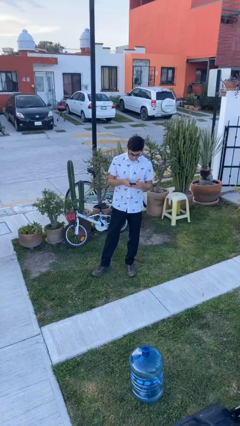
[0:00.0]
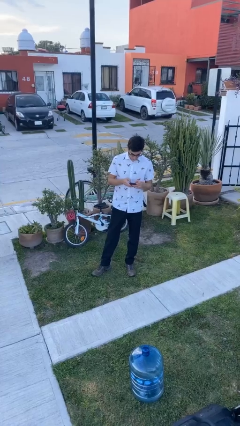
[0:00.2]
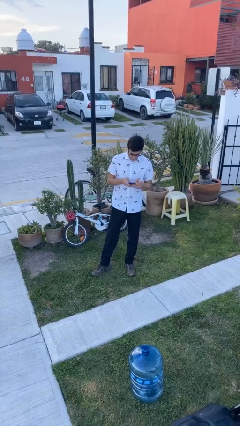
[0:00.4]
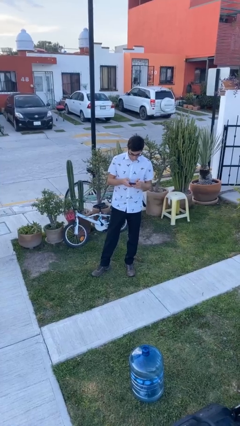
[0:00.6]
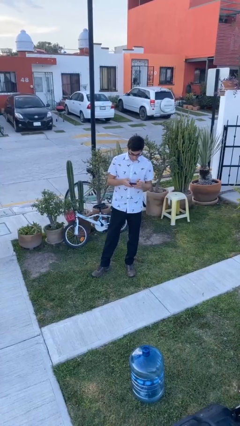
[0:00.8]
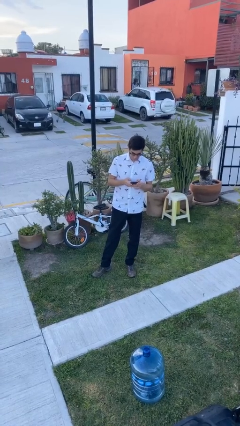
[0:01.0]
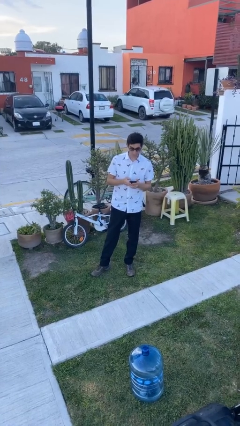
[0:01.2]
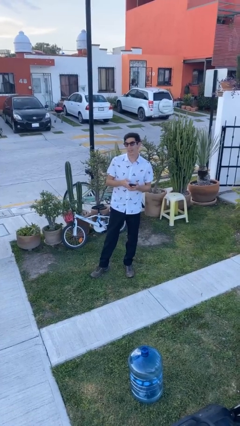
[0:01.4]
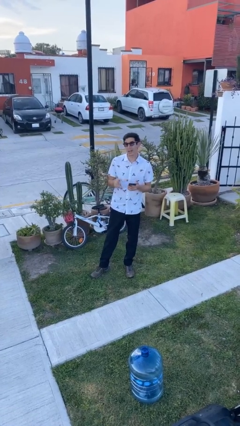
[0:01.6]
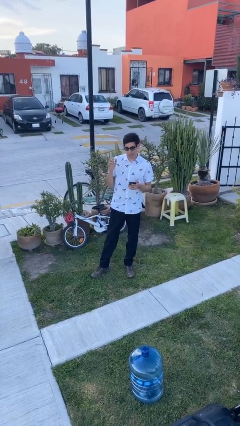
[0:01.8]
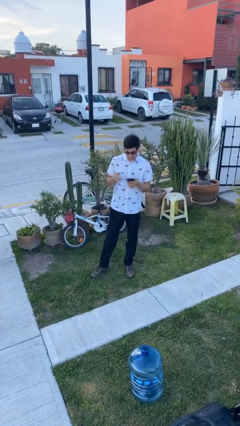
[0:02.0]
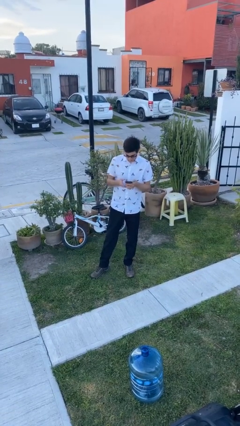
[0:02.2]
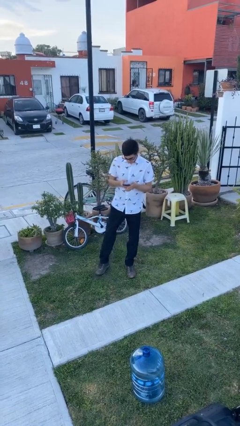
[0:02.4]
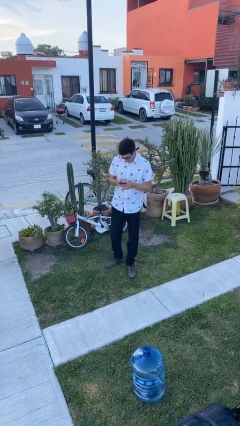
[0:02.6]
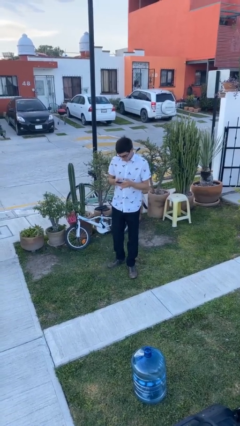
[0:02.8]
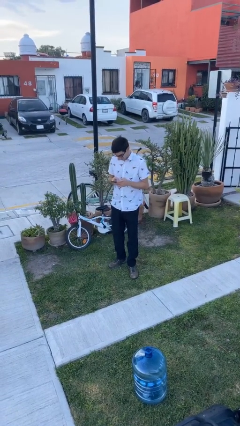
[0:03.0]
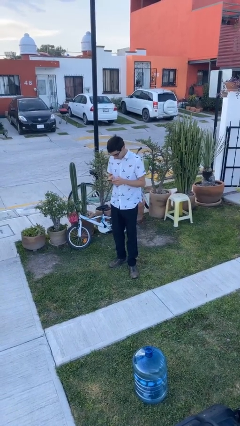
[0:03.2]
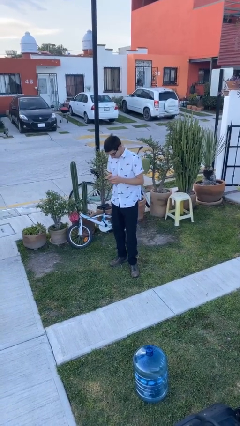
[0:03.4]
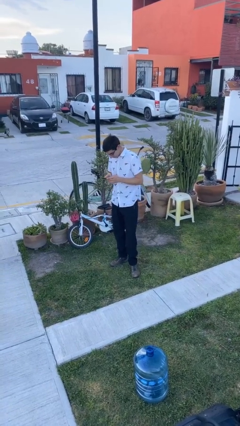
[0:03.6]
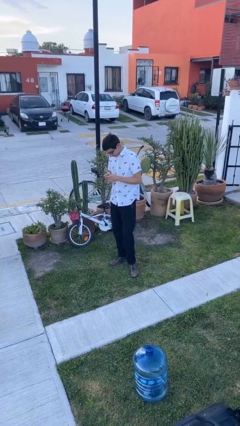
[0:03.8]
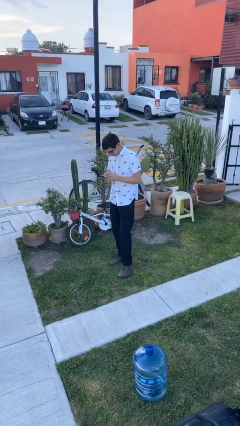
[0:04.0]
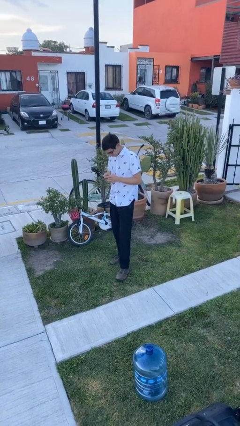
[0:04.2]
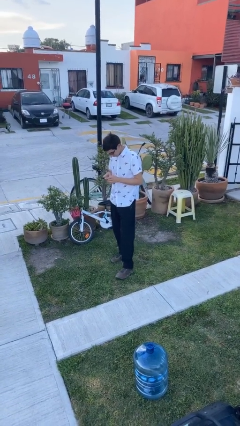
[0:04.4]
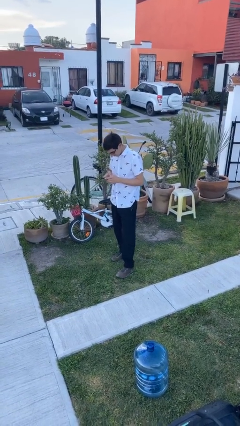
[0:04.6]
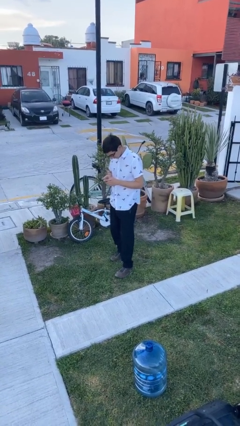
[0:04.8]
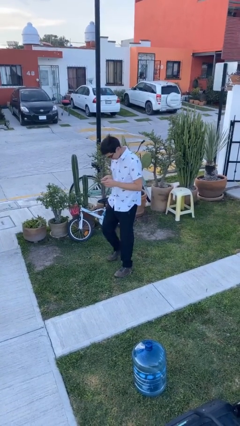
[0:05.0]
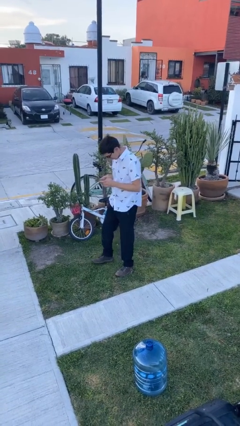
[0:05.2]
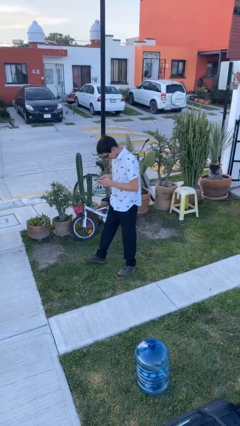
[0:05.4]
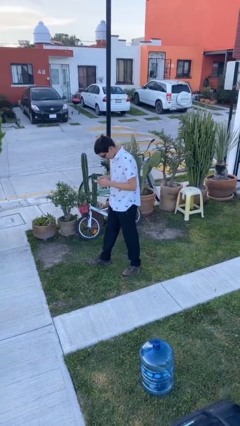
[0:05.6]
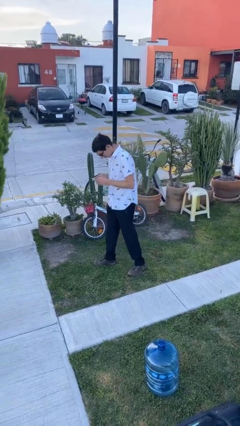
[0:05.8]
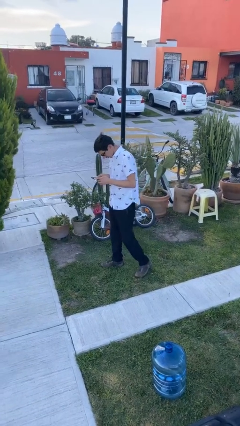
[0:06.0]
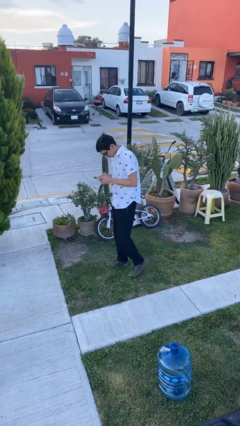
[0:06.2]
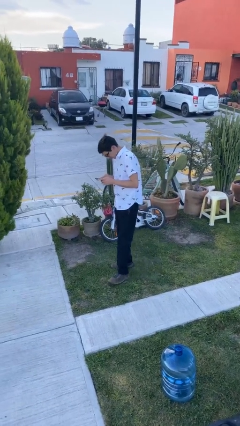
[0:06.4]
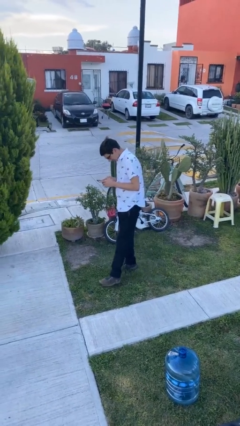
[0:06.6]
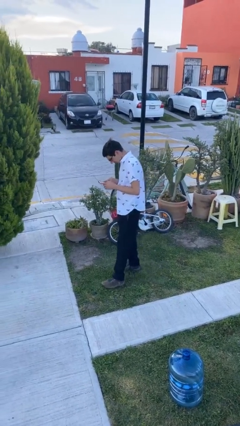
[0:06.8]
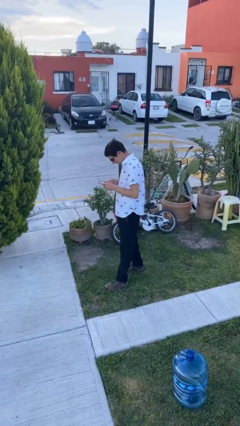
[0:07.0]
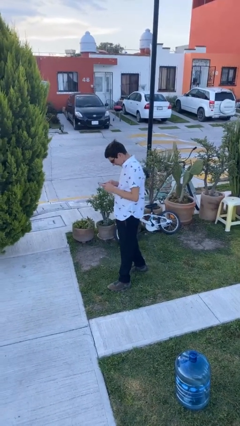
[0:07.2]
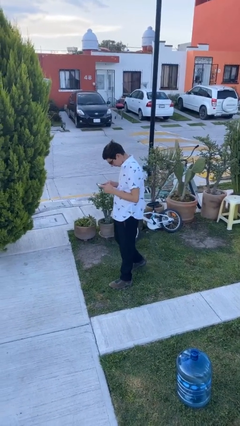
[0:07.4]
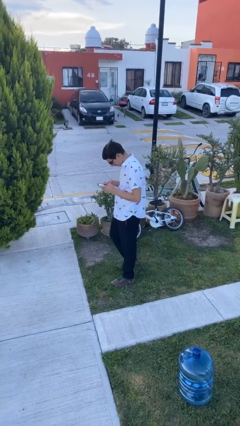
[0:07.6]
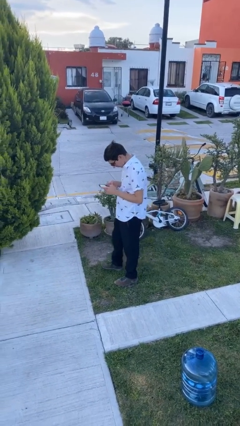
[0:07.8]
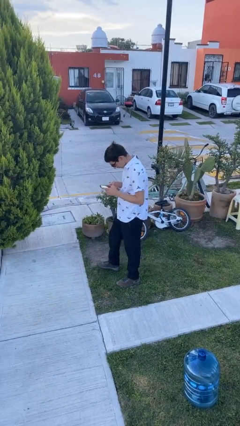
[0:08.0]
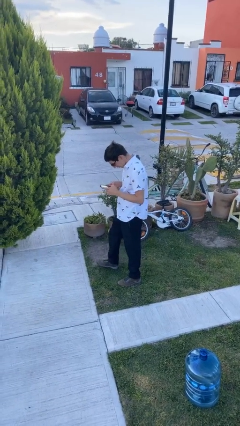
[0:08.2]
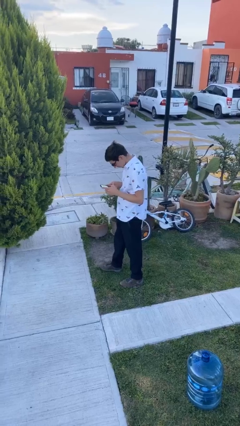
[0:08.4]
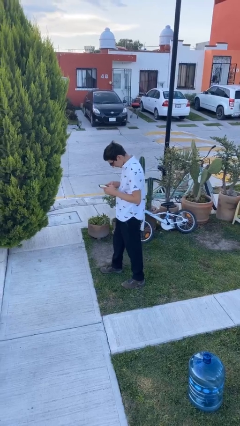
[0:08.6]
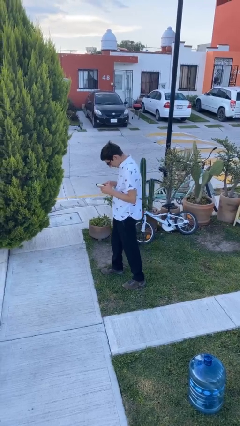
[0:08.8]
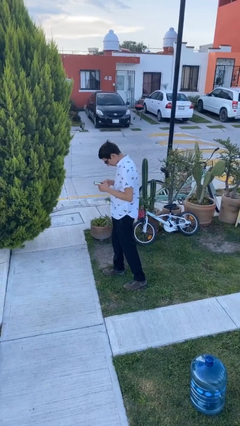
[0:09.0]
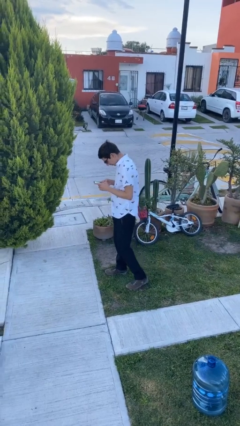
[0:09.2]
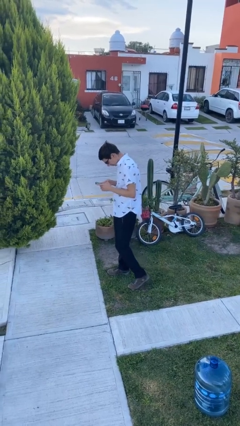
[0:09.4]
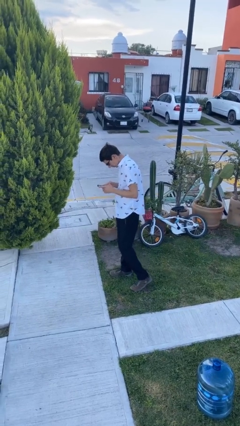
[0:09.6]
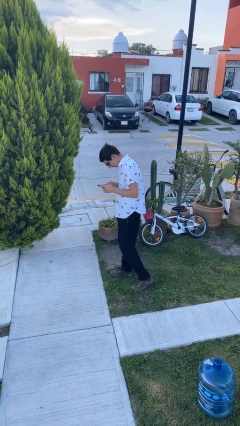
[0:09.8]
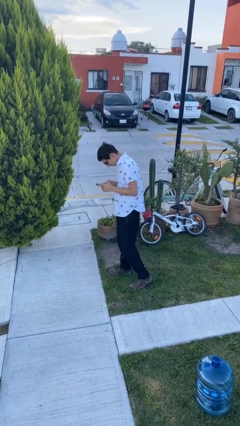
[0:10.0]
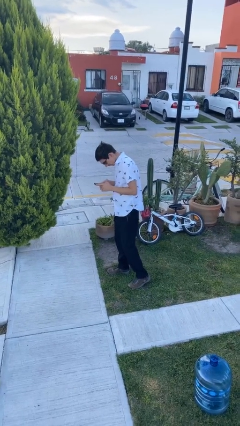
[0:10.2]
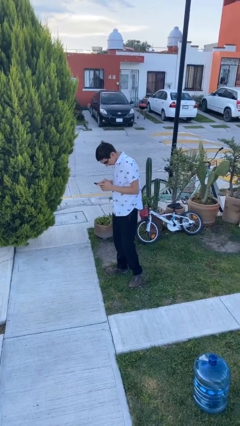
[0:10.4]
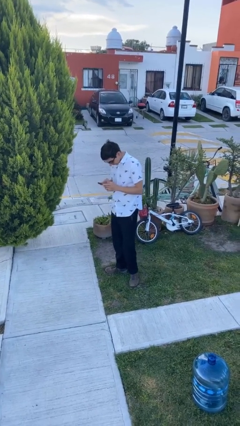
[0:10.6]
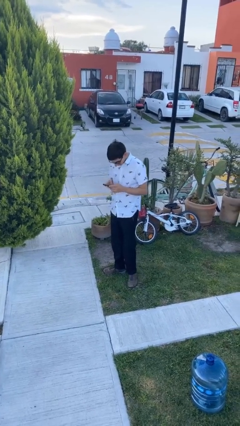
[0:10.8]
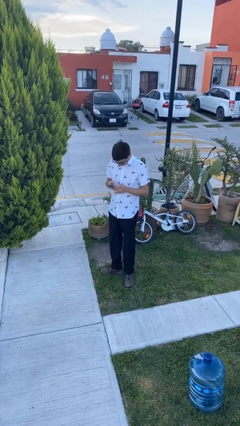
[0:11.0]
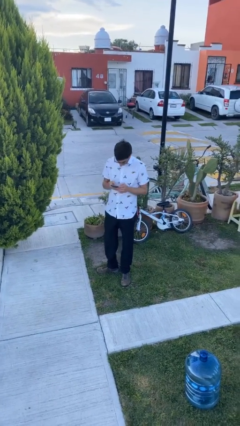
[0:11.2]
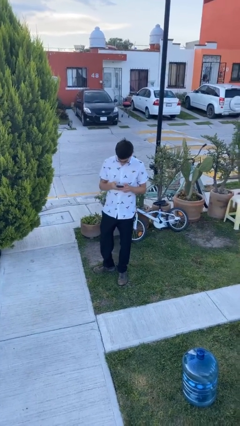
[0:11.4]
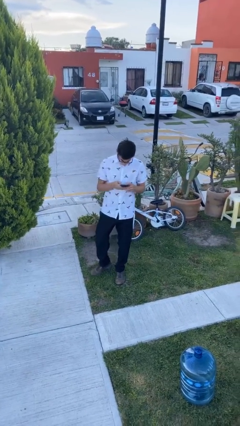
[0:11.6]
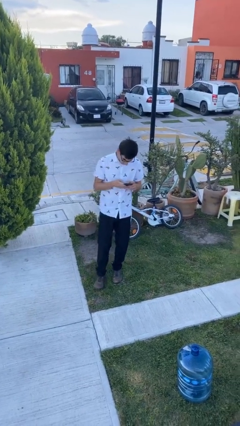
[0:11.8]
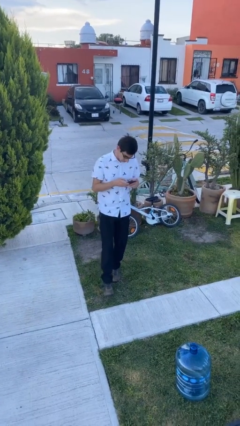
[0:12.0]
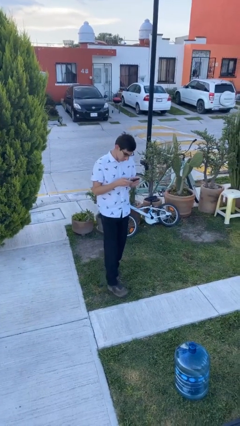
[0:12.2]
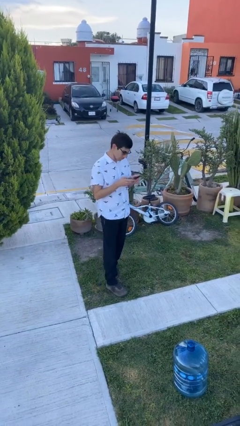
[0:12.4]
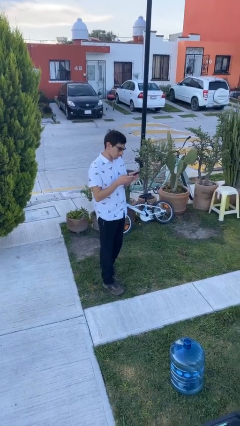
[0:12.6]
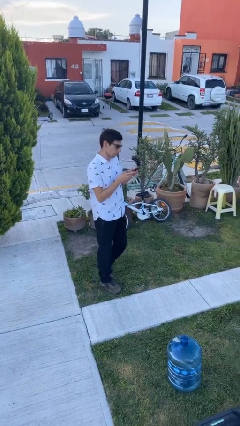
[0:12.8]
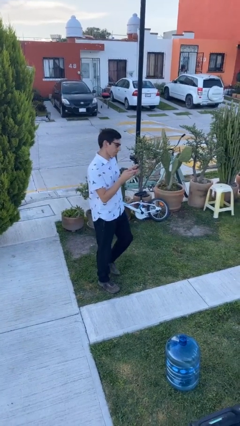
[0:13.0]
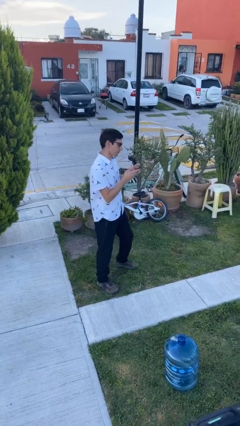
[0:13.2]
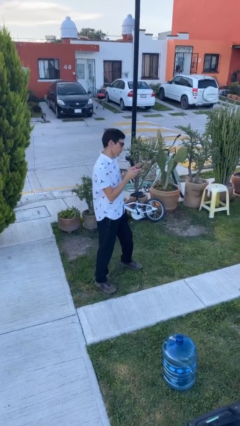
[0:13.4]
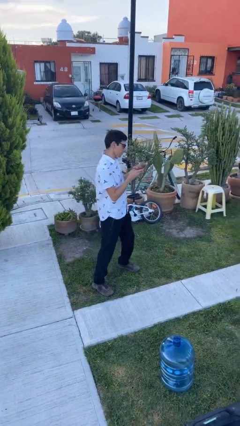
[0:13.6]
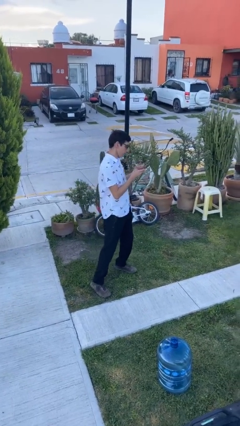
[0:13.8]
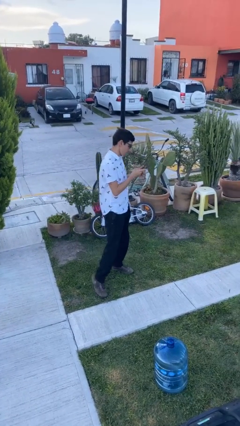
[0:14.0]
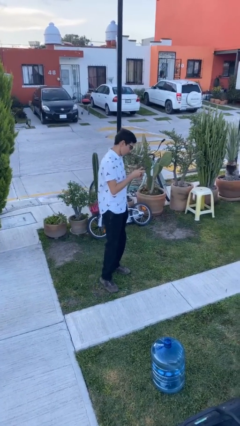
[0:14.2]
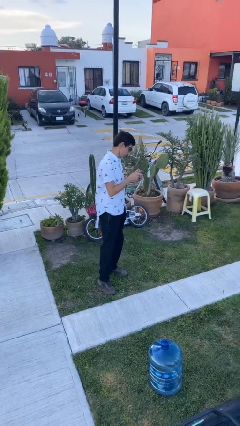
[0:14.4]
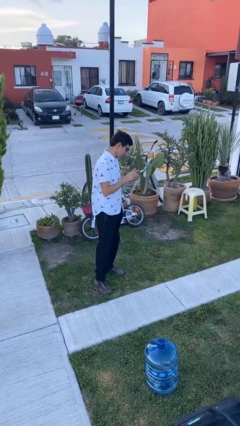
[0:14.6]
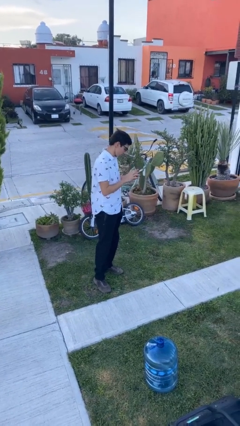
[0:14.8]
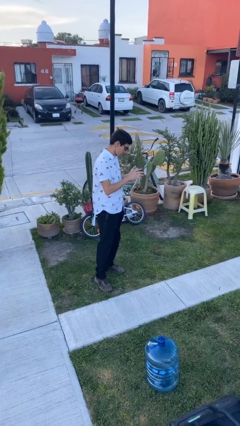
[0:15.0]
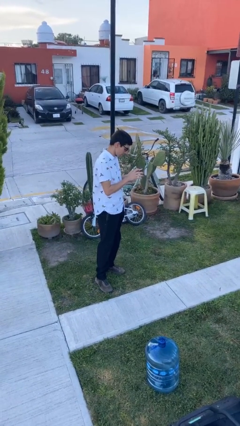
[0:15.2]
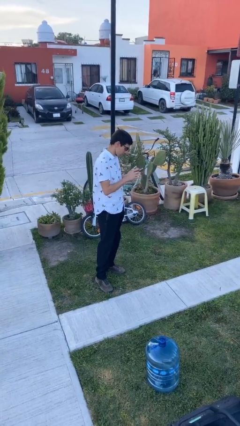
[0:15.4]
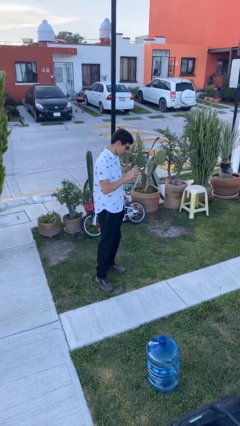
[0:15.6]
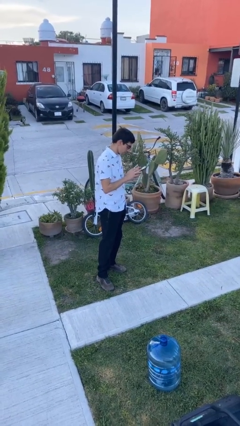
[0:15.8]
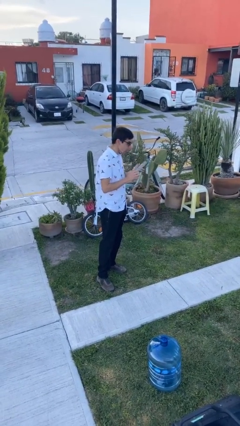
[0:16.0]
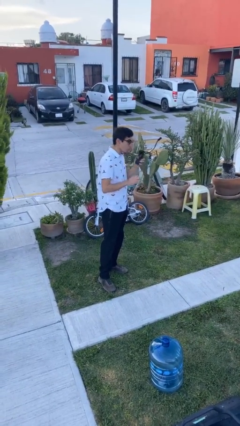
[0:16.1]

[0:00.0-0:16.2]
person texts on phone

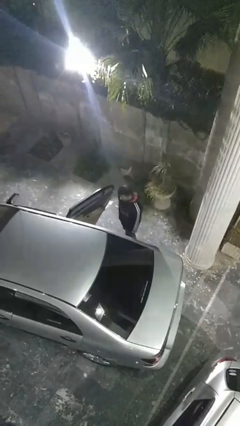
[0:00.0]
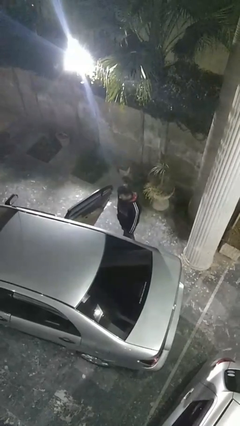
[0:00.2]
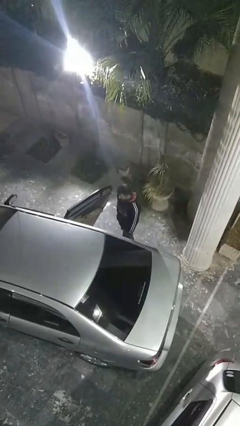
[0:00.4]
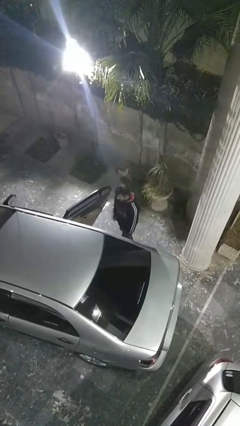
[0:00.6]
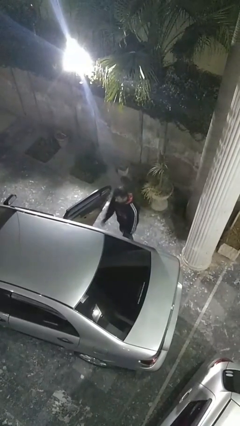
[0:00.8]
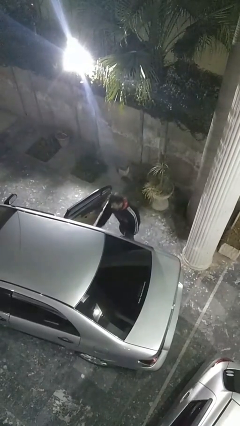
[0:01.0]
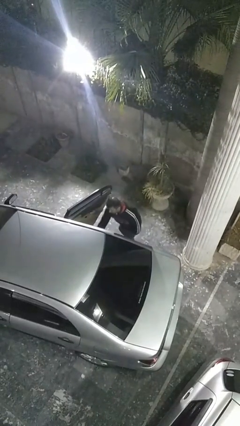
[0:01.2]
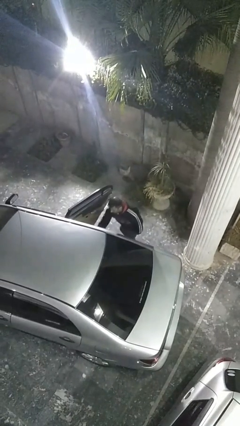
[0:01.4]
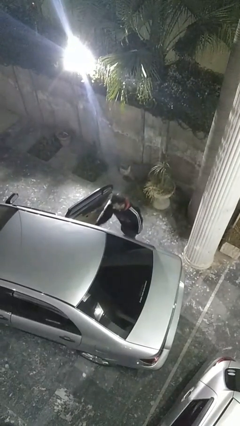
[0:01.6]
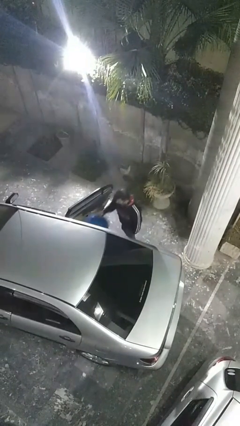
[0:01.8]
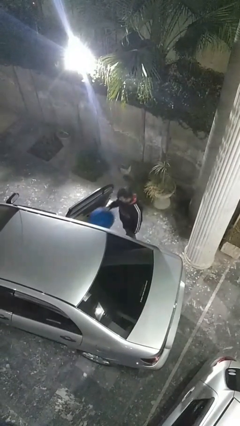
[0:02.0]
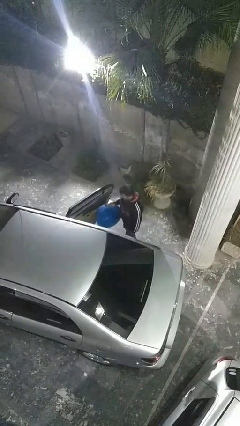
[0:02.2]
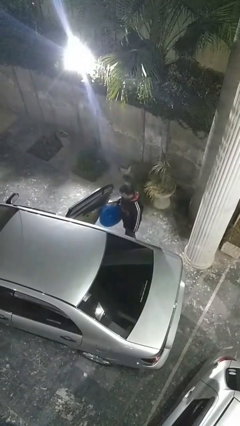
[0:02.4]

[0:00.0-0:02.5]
person unloads car
